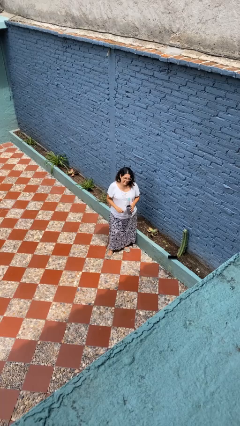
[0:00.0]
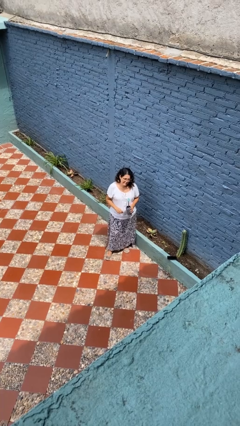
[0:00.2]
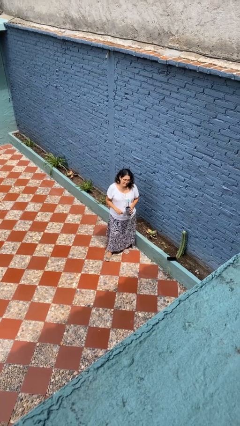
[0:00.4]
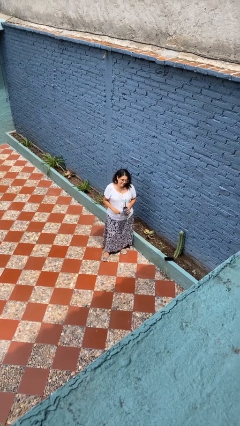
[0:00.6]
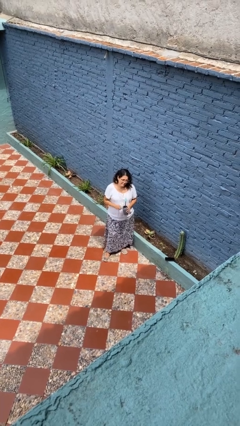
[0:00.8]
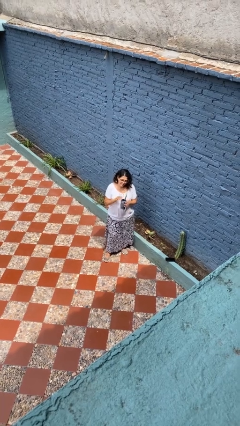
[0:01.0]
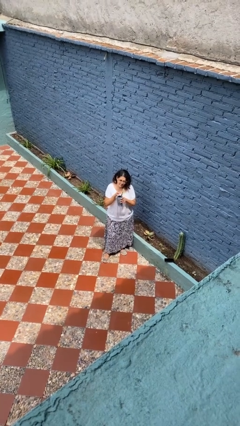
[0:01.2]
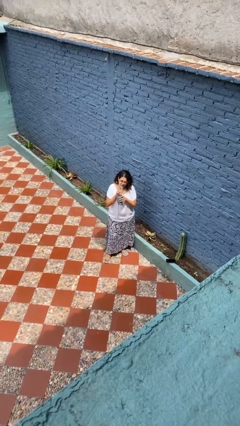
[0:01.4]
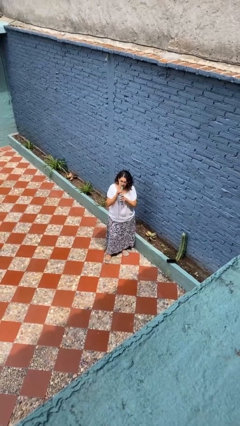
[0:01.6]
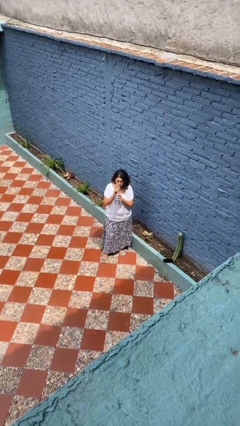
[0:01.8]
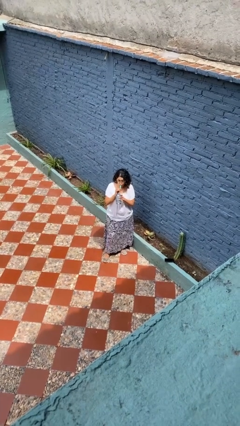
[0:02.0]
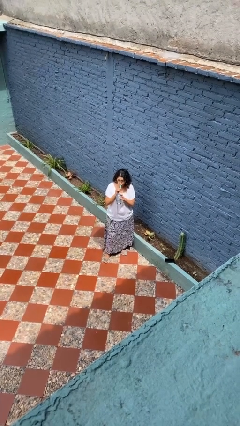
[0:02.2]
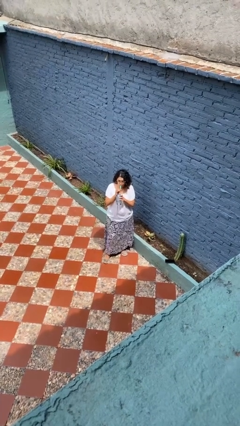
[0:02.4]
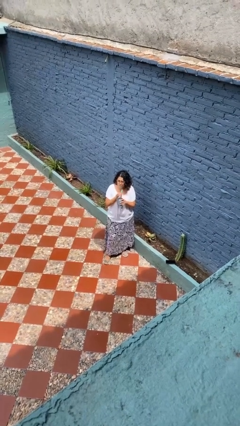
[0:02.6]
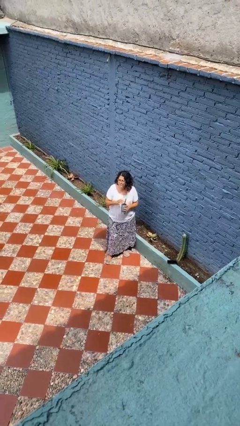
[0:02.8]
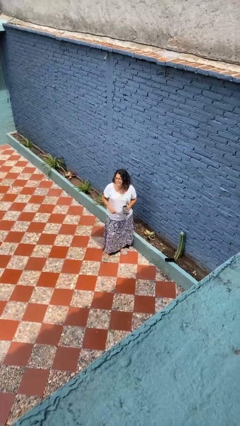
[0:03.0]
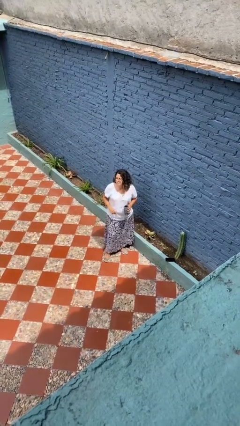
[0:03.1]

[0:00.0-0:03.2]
person drinks from straw

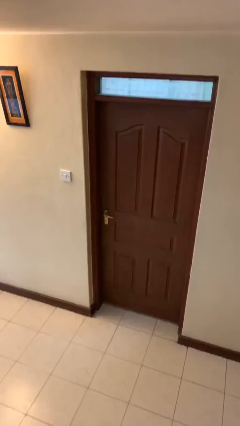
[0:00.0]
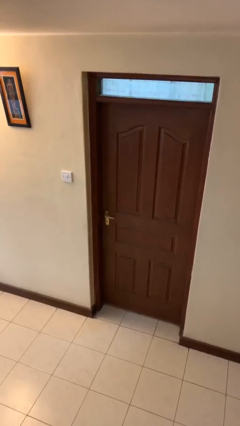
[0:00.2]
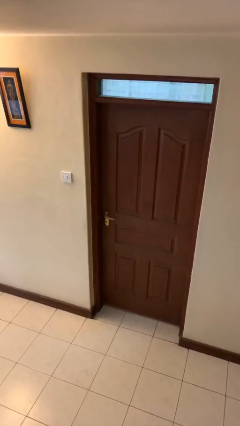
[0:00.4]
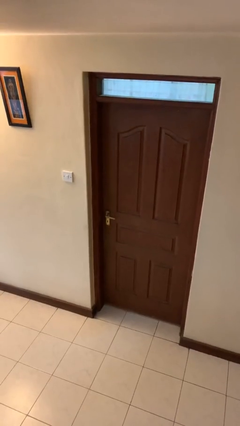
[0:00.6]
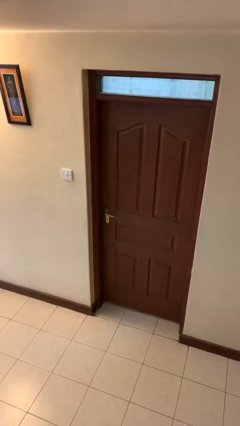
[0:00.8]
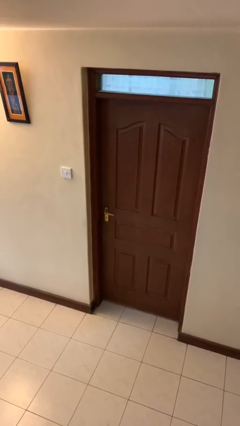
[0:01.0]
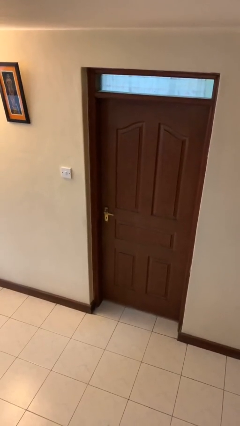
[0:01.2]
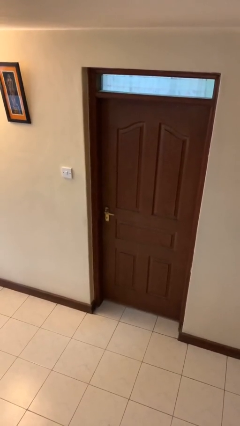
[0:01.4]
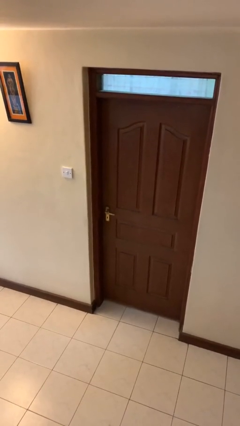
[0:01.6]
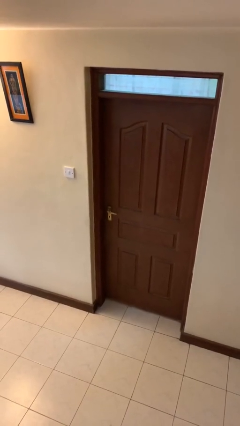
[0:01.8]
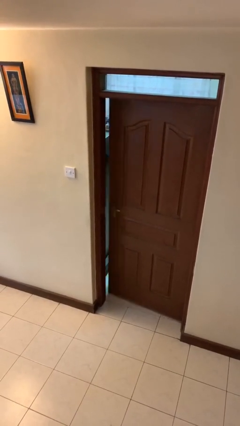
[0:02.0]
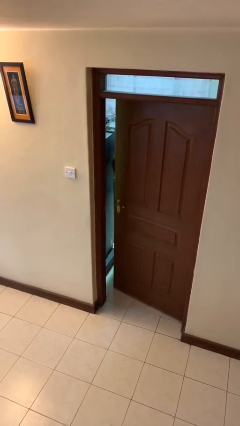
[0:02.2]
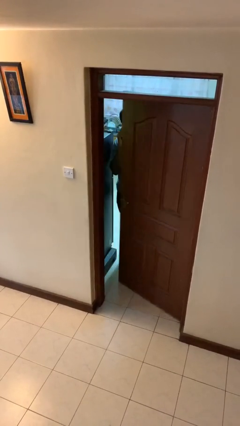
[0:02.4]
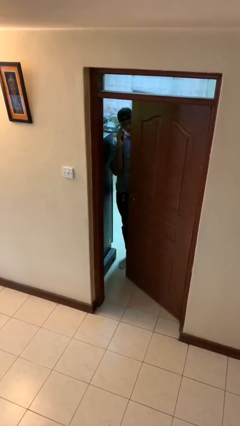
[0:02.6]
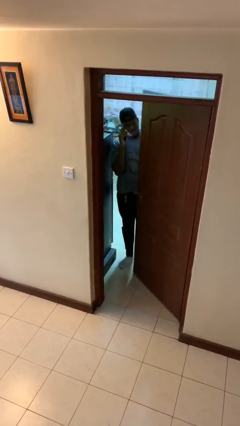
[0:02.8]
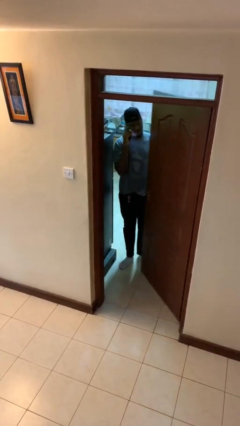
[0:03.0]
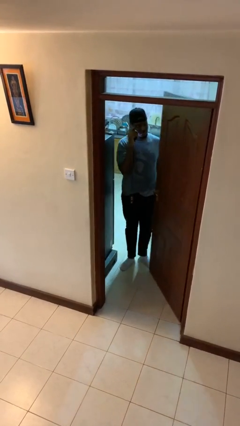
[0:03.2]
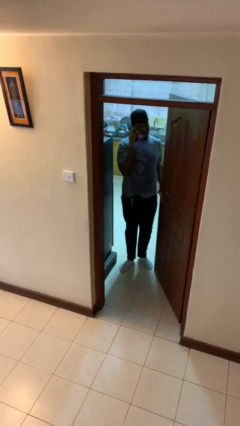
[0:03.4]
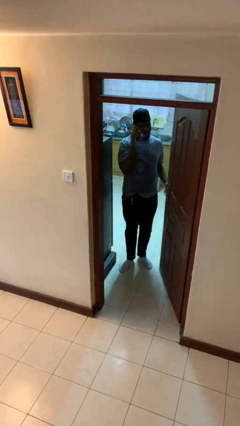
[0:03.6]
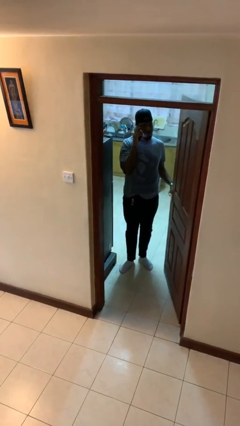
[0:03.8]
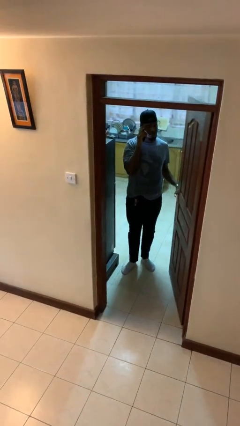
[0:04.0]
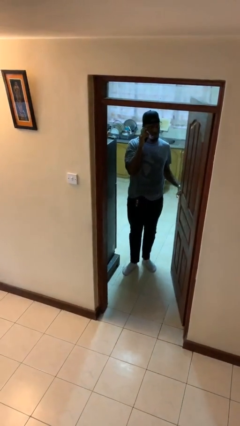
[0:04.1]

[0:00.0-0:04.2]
person opens facility door

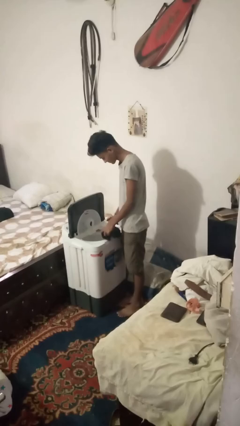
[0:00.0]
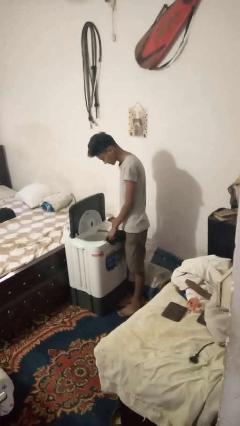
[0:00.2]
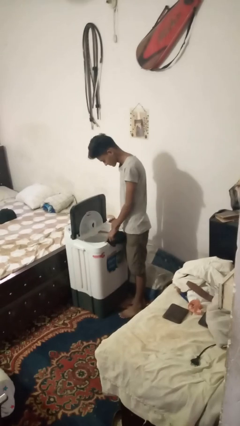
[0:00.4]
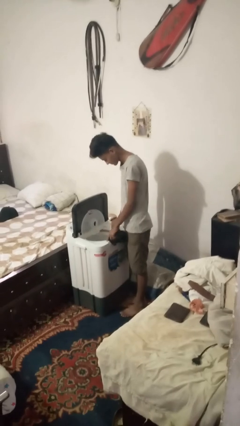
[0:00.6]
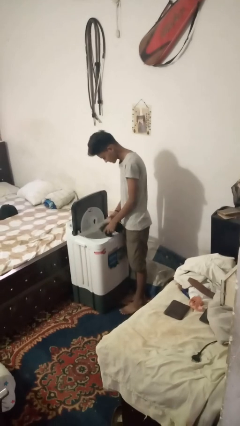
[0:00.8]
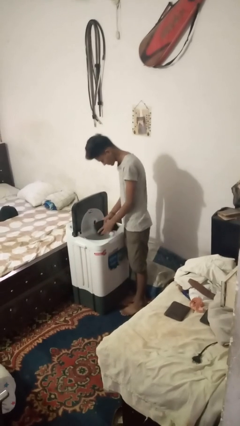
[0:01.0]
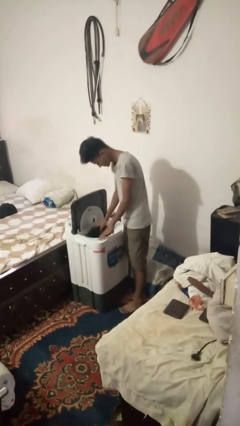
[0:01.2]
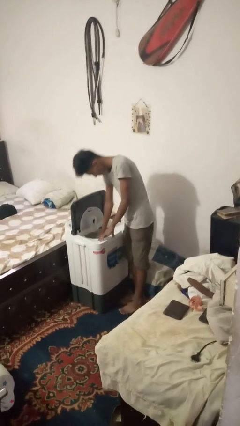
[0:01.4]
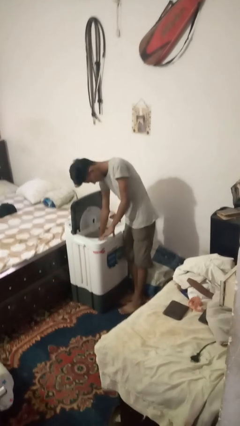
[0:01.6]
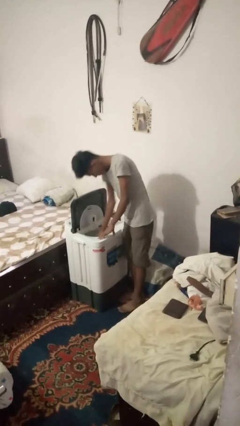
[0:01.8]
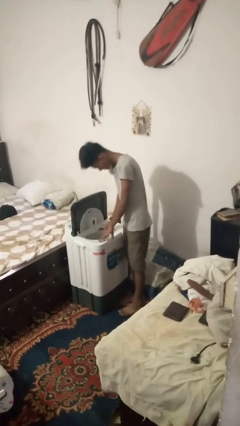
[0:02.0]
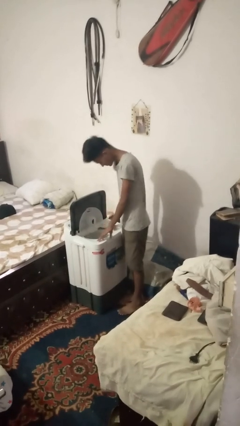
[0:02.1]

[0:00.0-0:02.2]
person loads clotheswasher

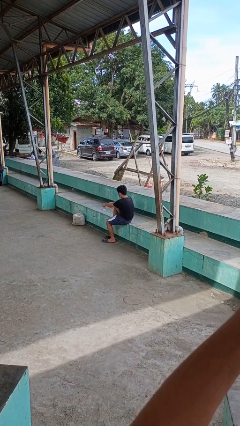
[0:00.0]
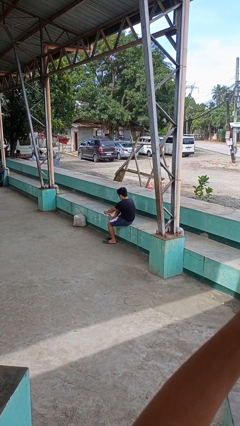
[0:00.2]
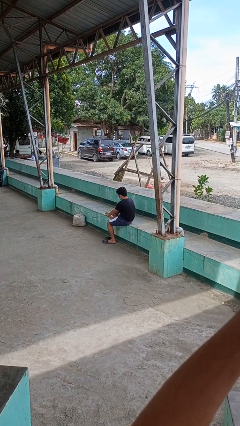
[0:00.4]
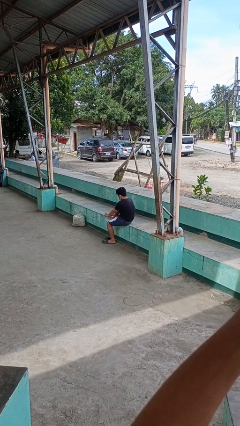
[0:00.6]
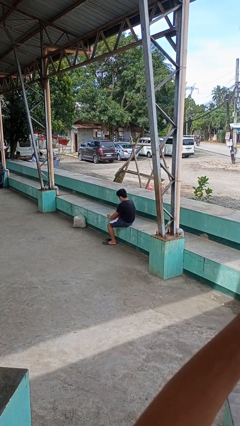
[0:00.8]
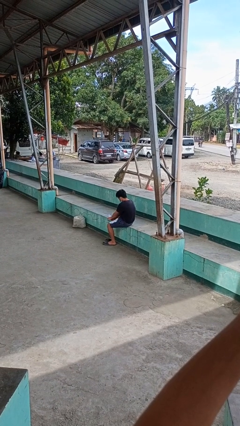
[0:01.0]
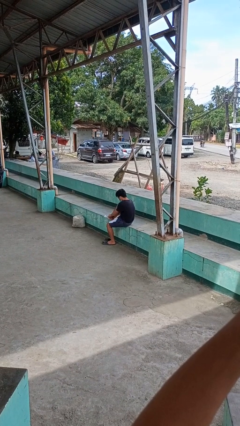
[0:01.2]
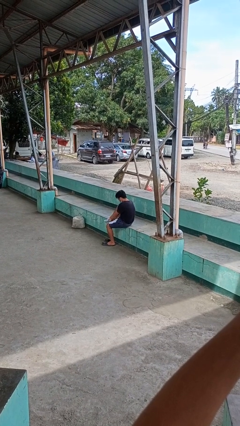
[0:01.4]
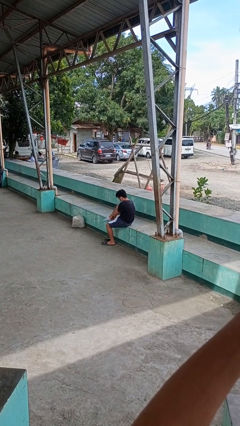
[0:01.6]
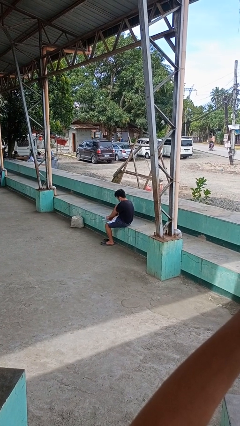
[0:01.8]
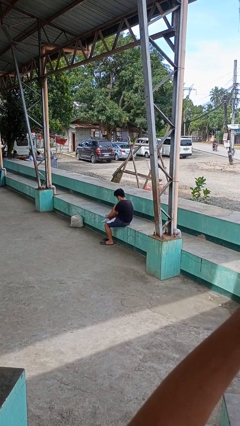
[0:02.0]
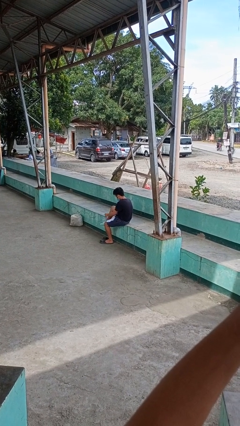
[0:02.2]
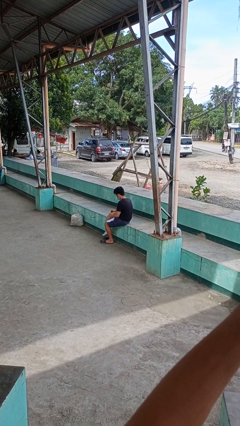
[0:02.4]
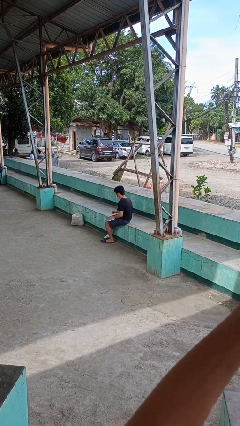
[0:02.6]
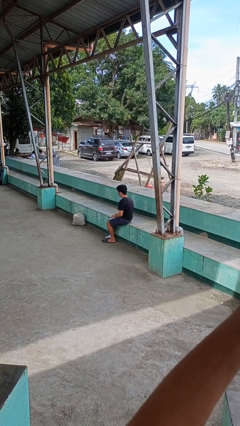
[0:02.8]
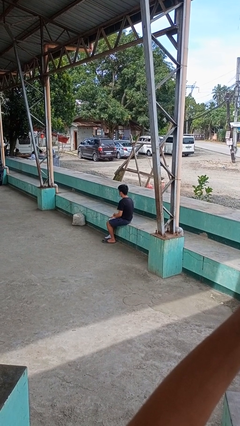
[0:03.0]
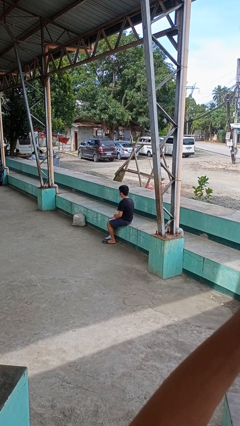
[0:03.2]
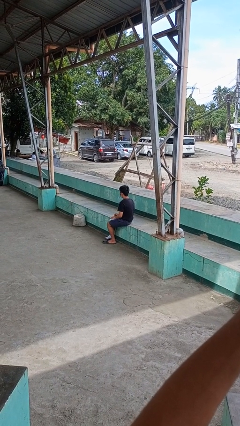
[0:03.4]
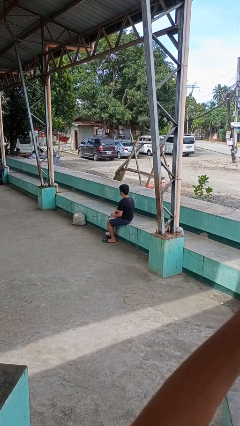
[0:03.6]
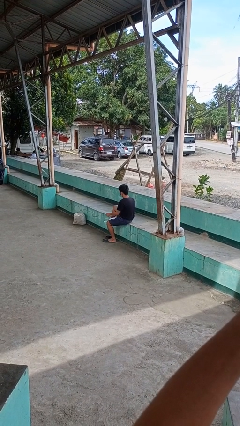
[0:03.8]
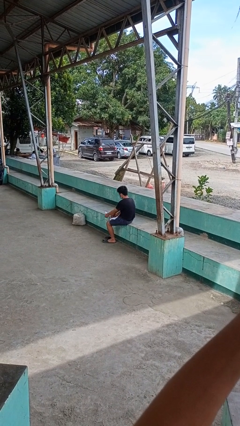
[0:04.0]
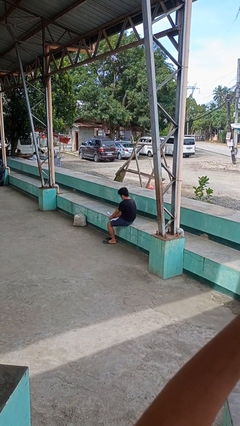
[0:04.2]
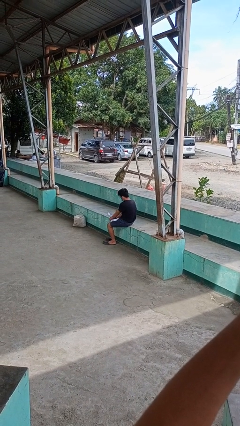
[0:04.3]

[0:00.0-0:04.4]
person puts on socks

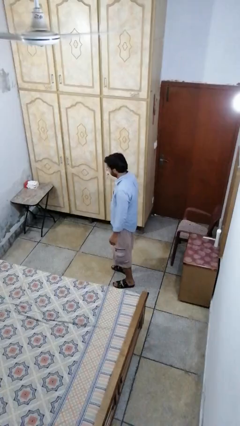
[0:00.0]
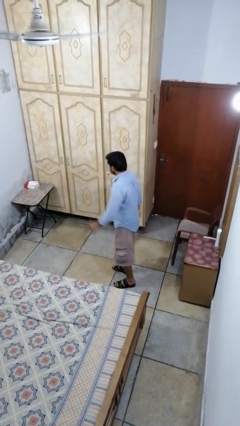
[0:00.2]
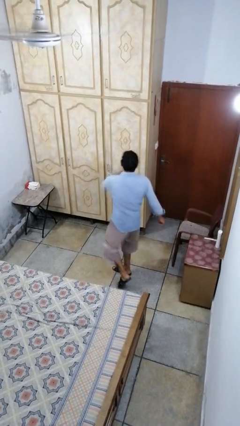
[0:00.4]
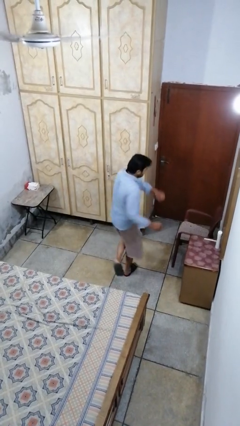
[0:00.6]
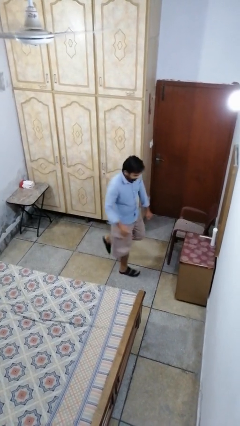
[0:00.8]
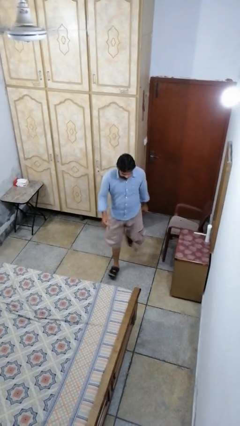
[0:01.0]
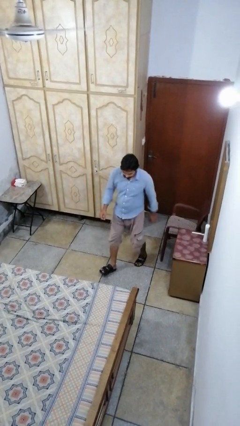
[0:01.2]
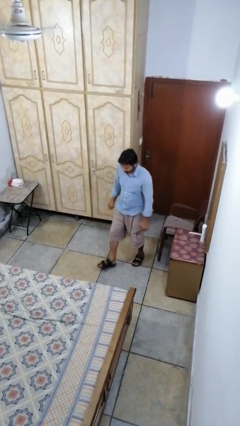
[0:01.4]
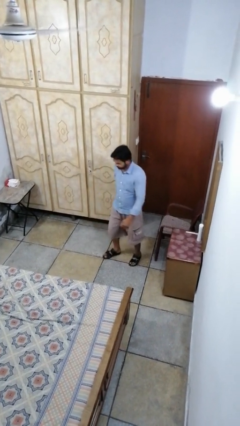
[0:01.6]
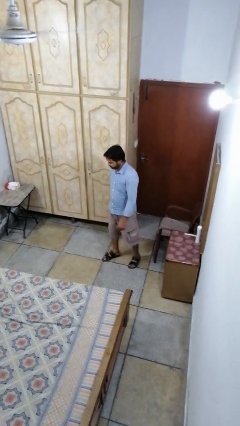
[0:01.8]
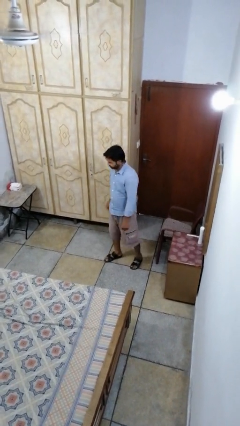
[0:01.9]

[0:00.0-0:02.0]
person twirls

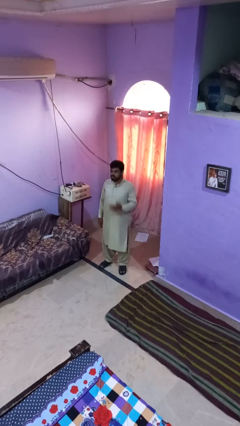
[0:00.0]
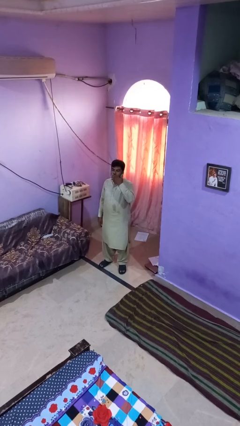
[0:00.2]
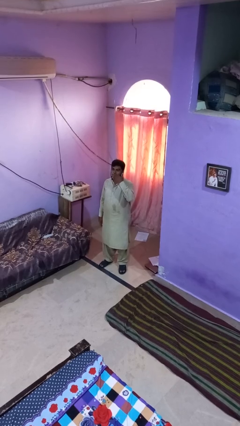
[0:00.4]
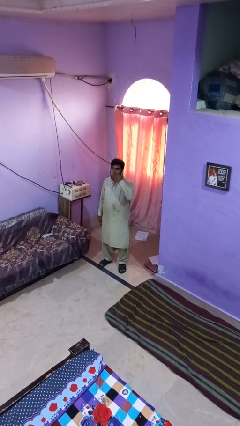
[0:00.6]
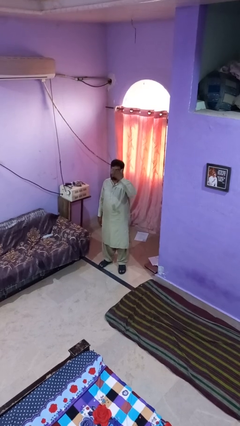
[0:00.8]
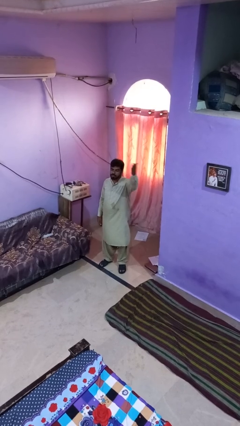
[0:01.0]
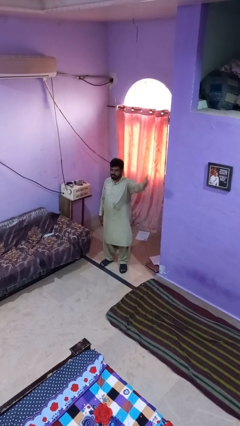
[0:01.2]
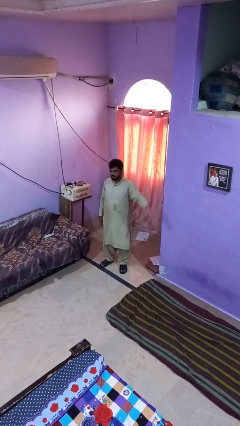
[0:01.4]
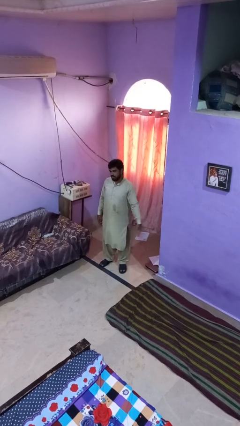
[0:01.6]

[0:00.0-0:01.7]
person gestures blow kiss
